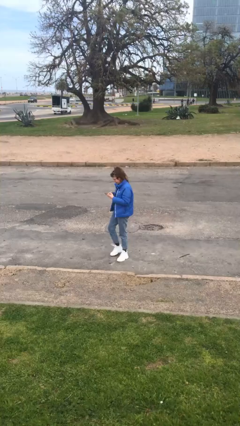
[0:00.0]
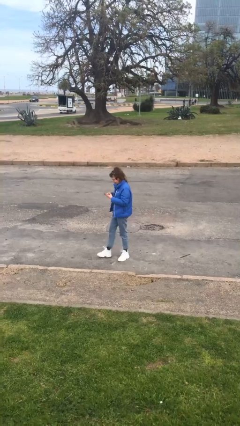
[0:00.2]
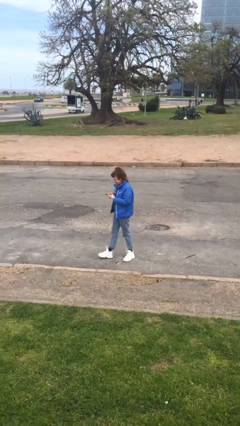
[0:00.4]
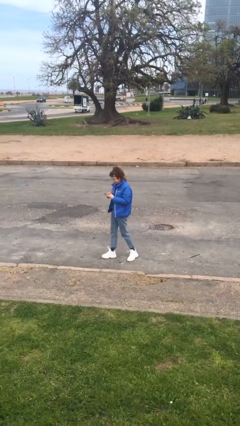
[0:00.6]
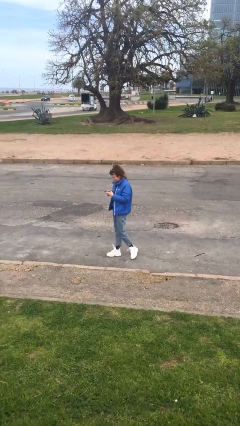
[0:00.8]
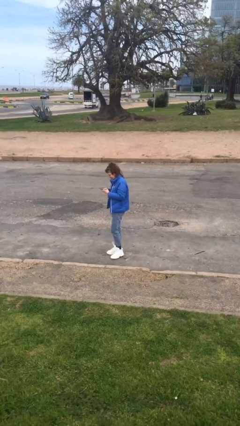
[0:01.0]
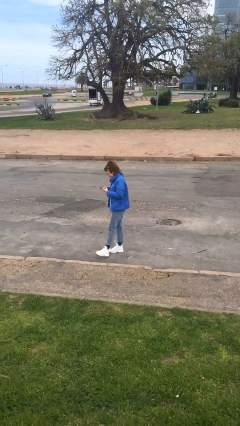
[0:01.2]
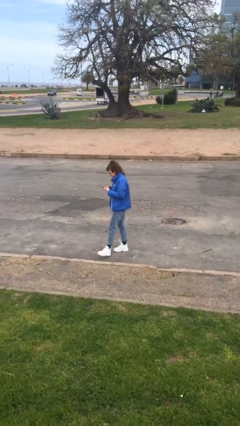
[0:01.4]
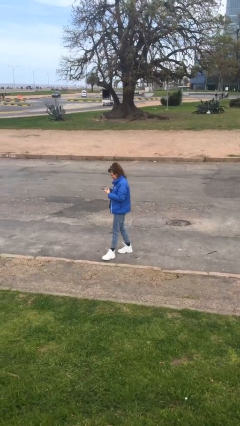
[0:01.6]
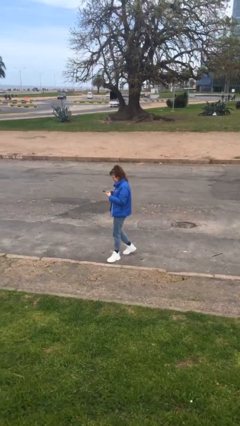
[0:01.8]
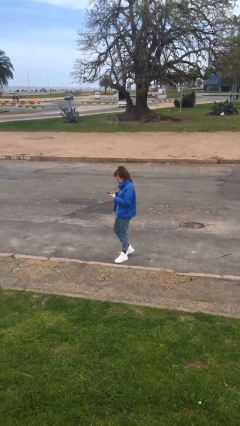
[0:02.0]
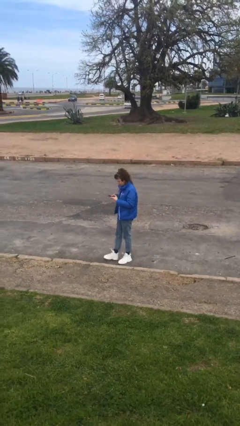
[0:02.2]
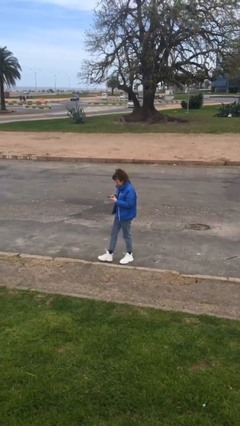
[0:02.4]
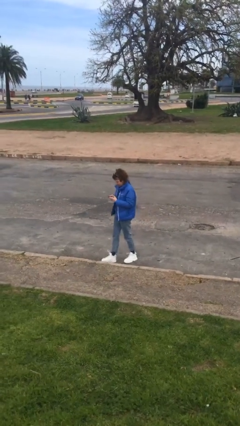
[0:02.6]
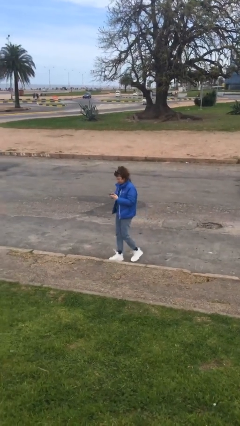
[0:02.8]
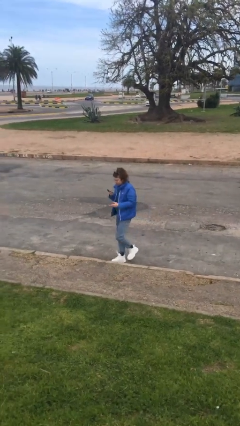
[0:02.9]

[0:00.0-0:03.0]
person texts on phone

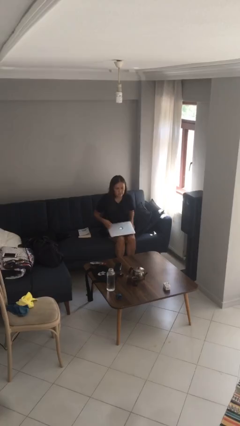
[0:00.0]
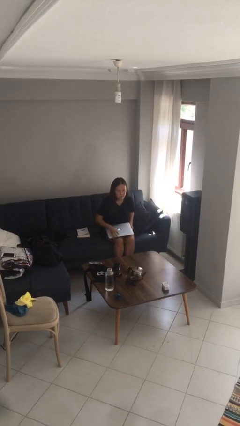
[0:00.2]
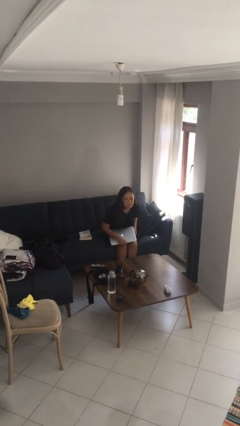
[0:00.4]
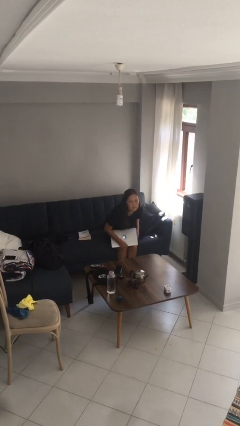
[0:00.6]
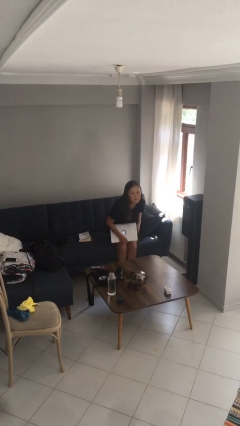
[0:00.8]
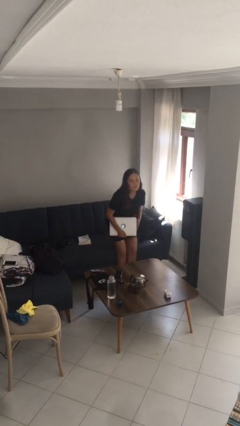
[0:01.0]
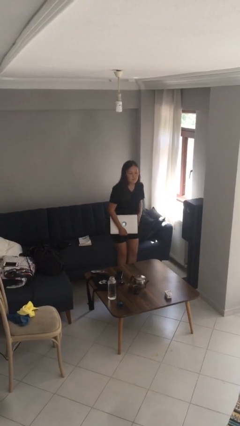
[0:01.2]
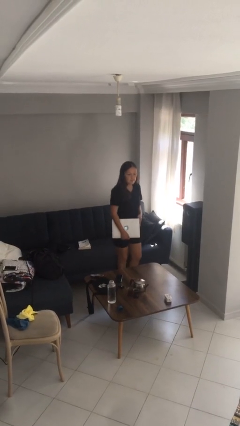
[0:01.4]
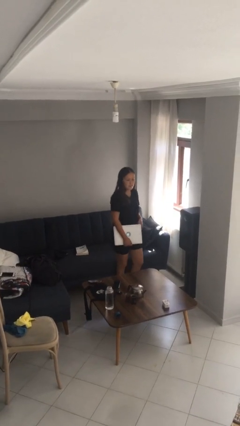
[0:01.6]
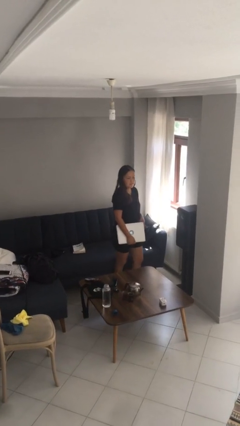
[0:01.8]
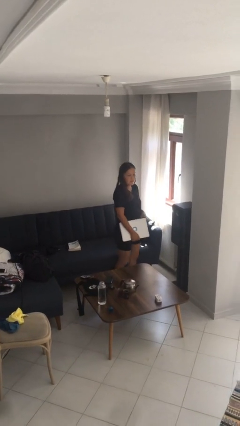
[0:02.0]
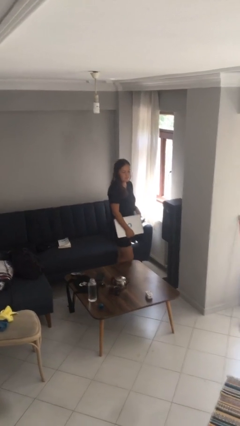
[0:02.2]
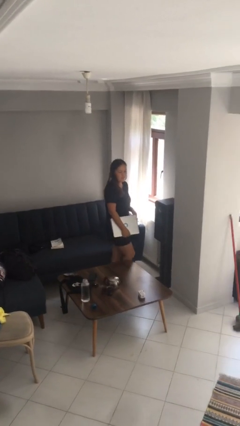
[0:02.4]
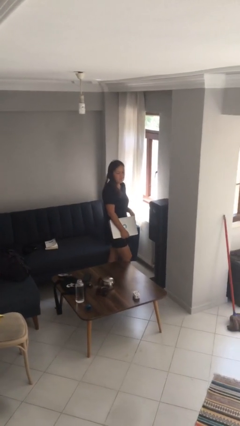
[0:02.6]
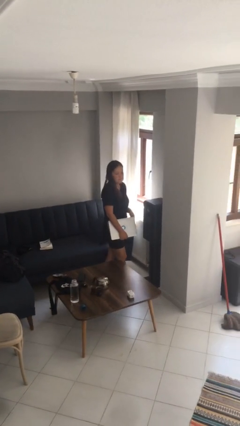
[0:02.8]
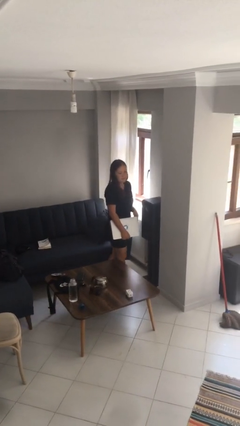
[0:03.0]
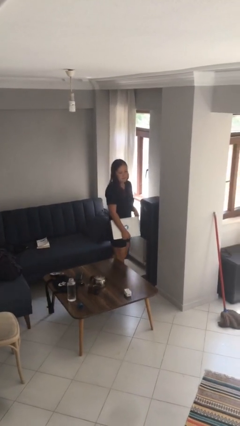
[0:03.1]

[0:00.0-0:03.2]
person stands up

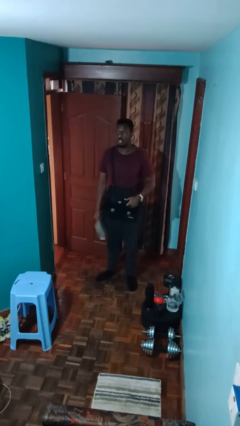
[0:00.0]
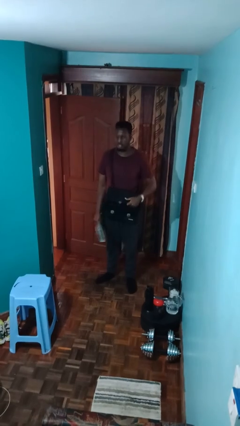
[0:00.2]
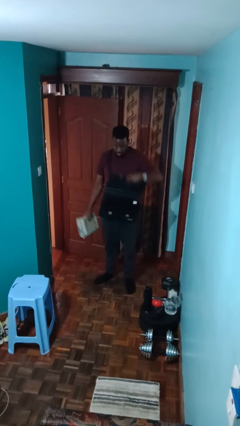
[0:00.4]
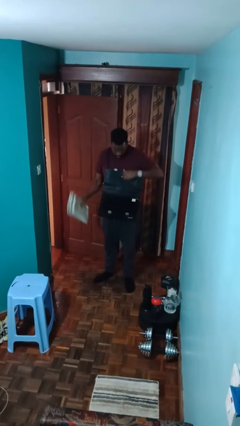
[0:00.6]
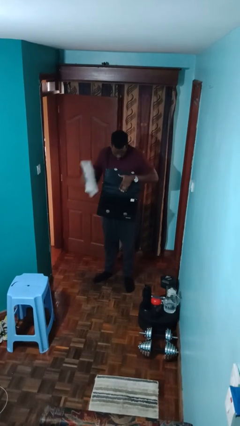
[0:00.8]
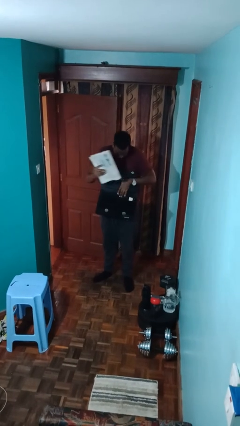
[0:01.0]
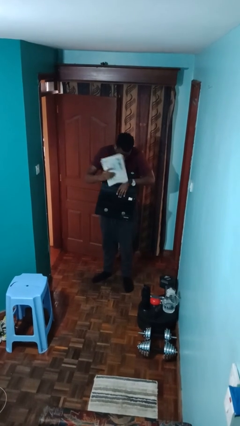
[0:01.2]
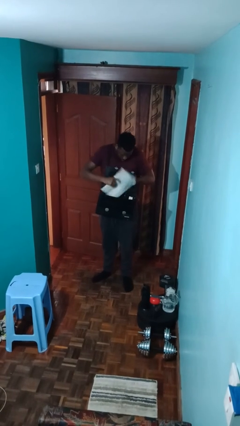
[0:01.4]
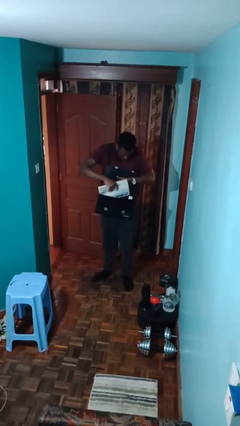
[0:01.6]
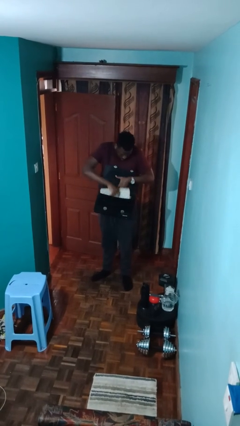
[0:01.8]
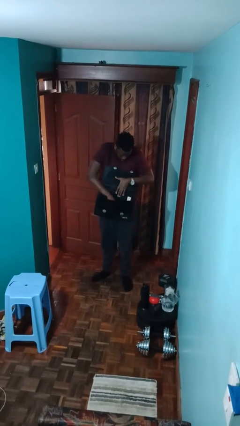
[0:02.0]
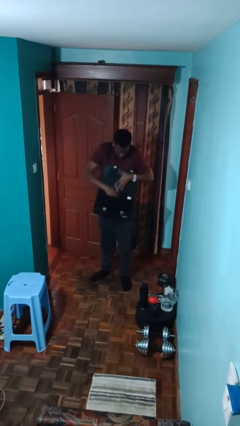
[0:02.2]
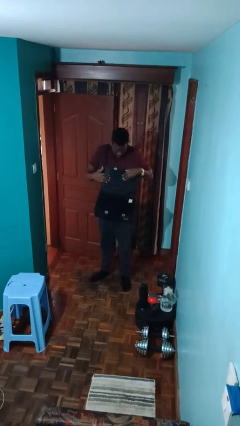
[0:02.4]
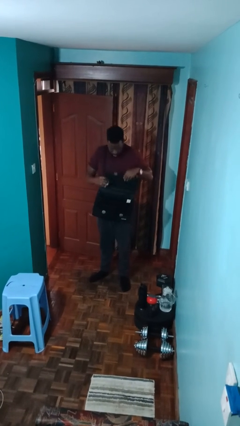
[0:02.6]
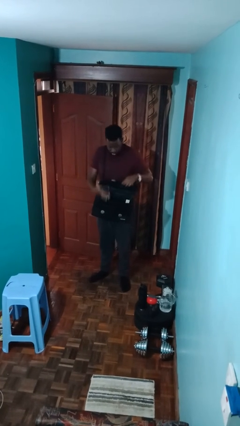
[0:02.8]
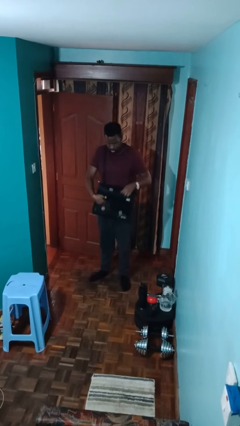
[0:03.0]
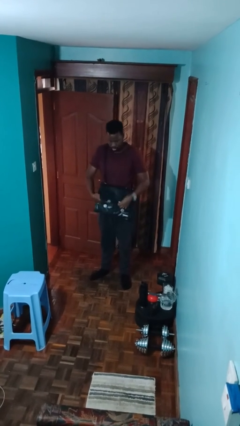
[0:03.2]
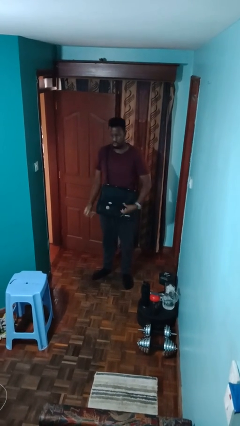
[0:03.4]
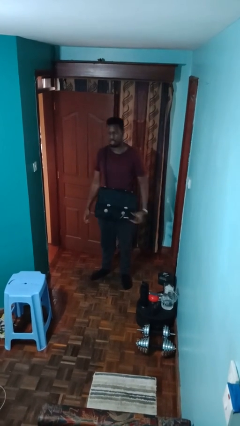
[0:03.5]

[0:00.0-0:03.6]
person puts object into purse

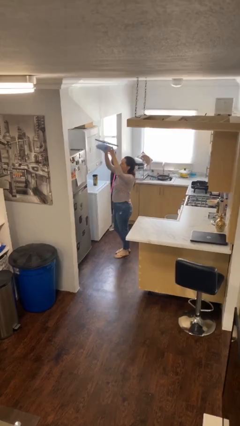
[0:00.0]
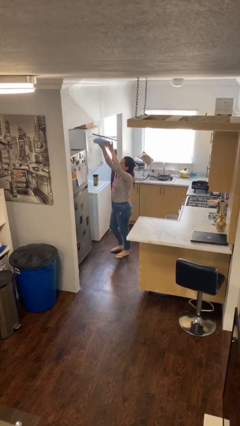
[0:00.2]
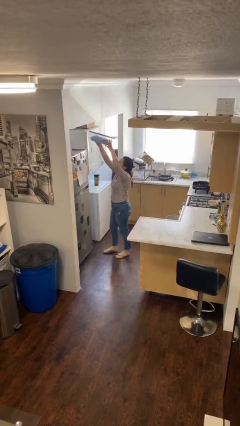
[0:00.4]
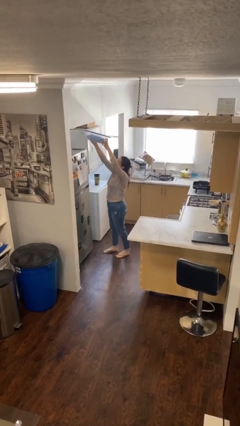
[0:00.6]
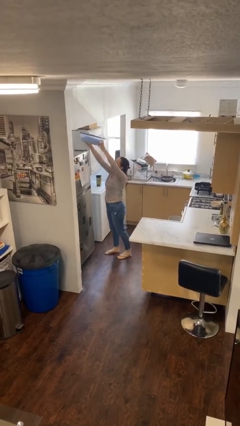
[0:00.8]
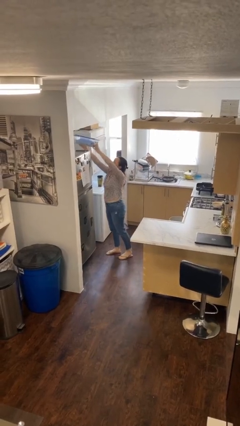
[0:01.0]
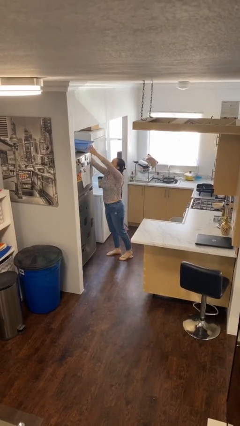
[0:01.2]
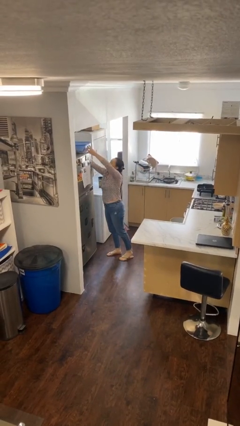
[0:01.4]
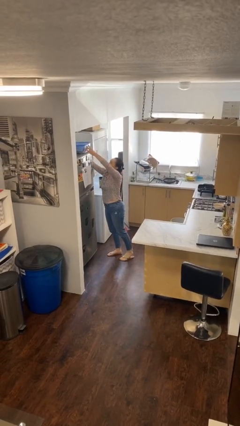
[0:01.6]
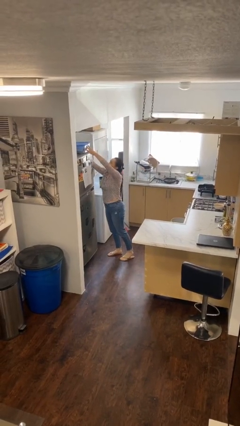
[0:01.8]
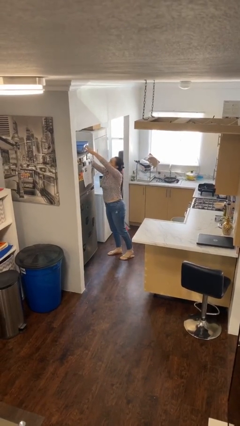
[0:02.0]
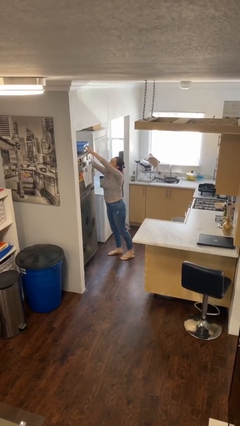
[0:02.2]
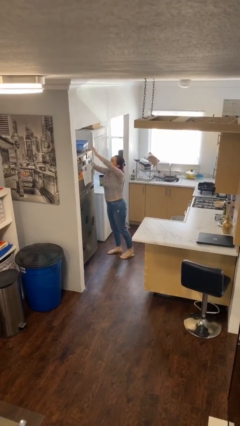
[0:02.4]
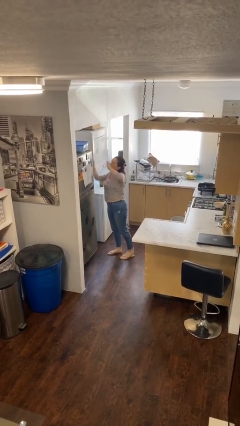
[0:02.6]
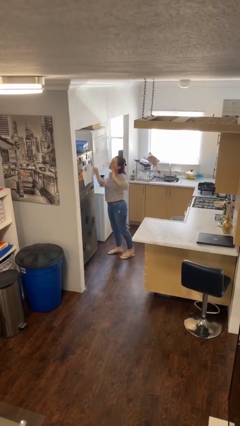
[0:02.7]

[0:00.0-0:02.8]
person puts down object on shelf

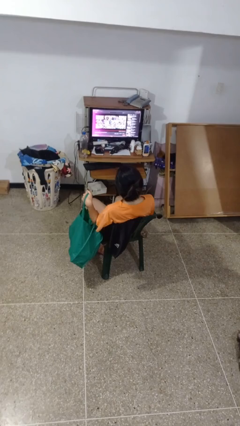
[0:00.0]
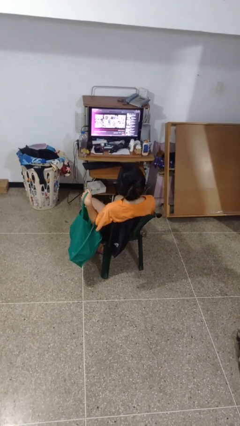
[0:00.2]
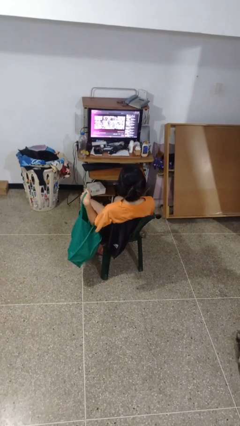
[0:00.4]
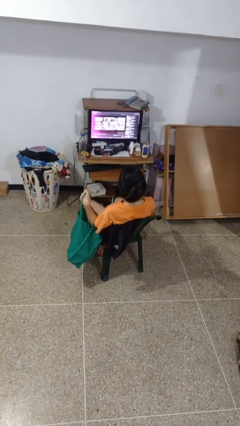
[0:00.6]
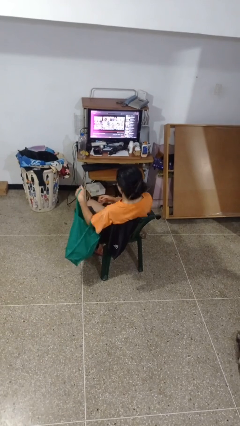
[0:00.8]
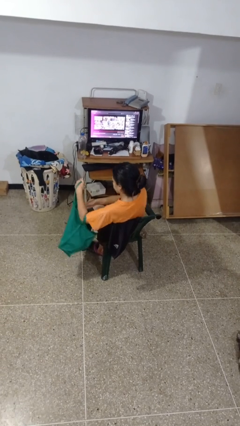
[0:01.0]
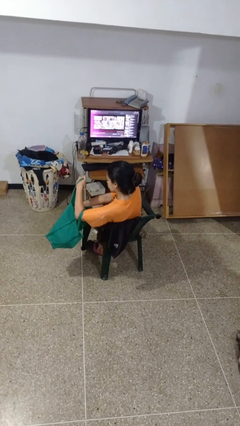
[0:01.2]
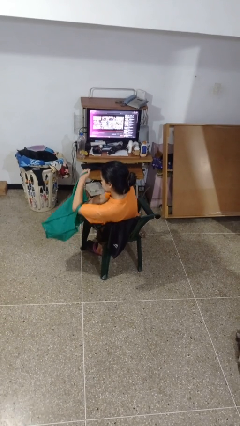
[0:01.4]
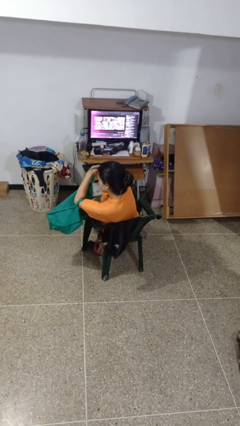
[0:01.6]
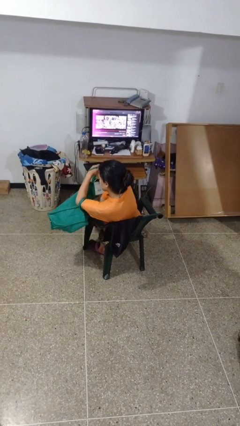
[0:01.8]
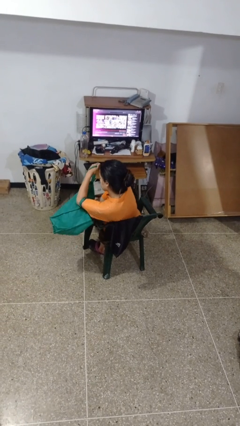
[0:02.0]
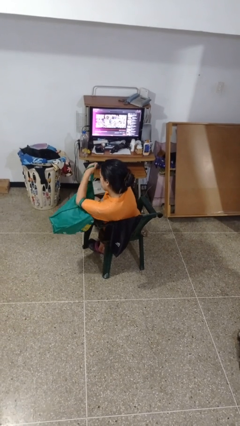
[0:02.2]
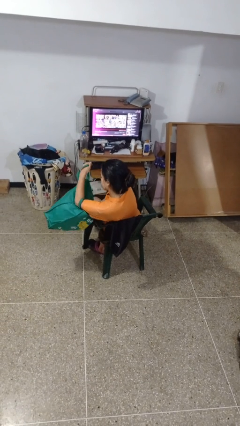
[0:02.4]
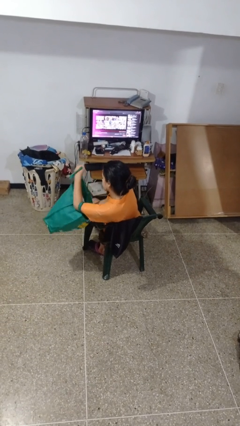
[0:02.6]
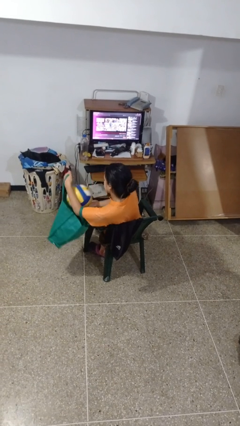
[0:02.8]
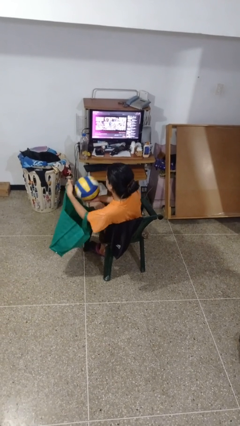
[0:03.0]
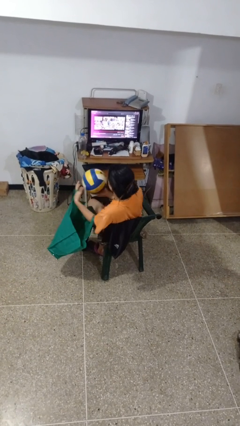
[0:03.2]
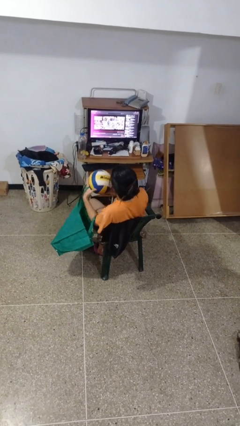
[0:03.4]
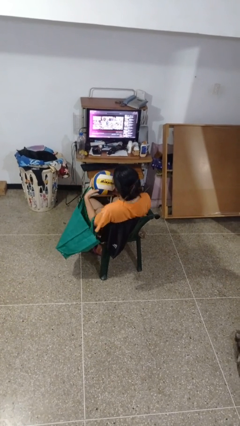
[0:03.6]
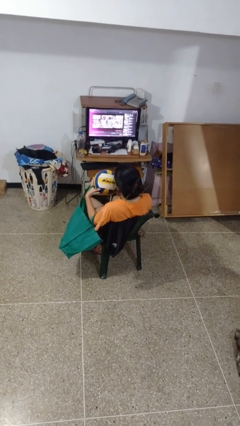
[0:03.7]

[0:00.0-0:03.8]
person takes object from bag

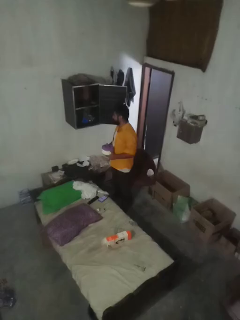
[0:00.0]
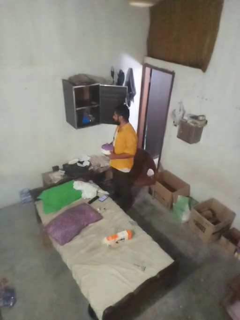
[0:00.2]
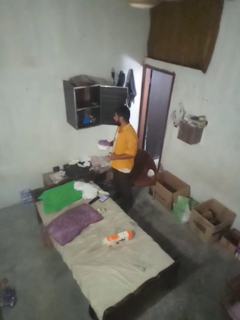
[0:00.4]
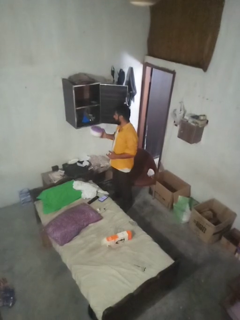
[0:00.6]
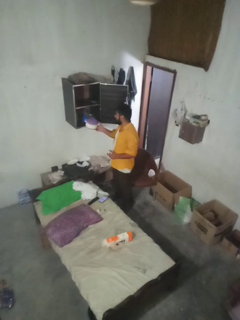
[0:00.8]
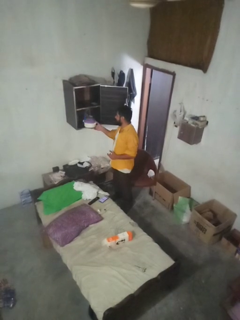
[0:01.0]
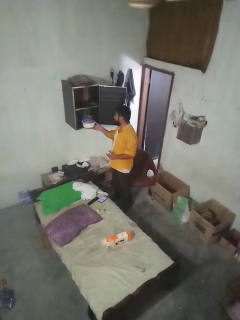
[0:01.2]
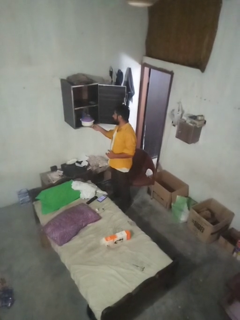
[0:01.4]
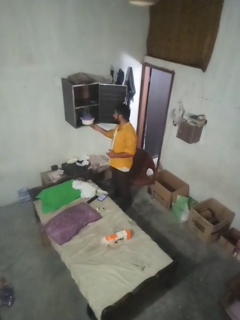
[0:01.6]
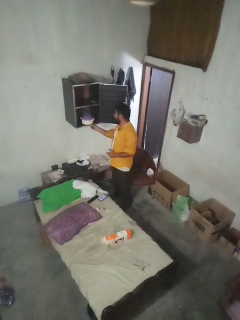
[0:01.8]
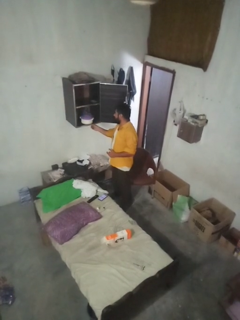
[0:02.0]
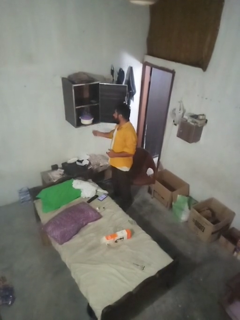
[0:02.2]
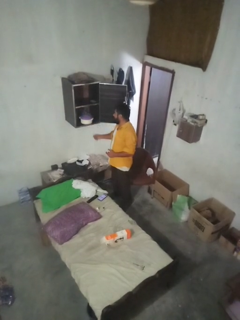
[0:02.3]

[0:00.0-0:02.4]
person loads groceries into refrigerator
